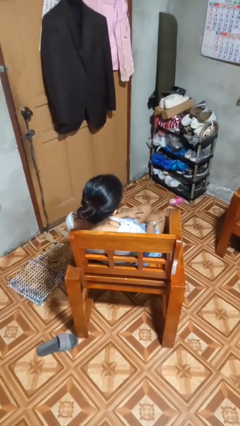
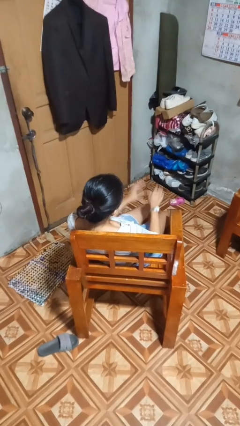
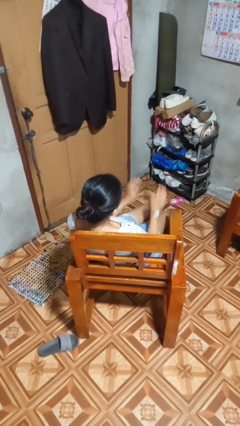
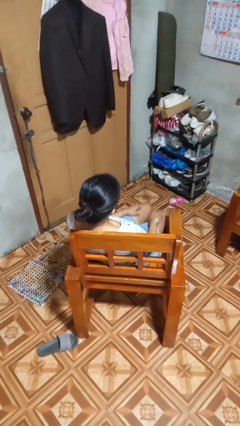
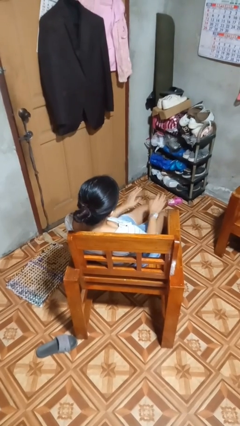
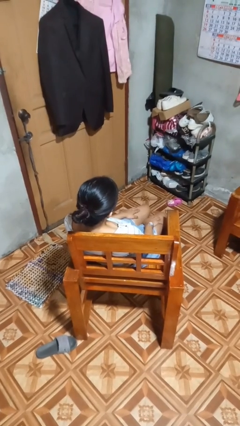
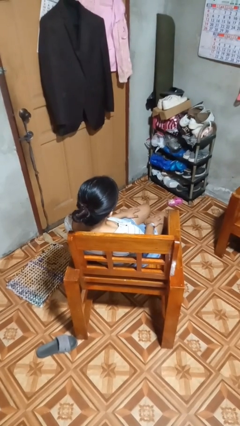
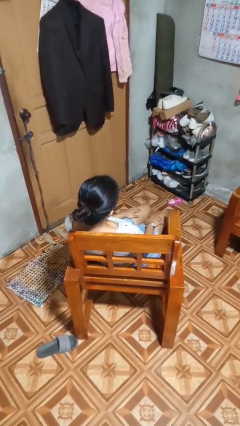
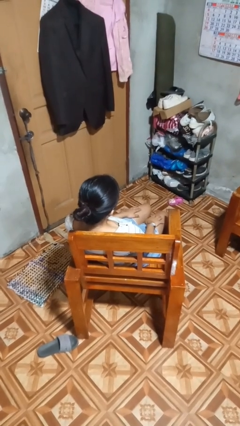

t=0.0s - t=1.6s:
person slaps hands on thighs

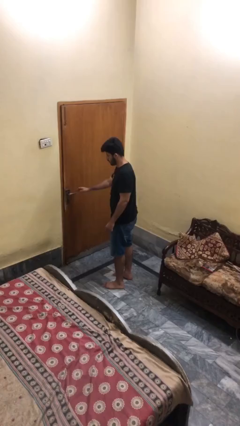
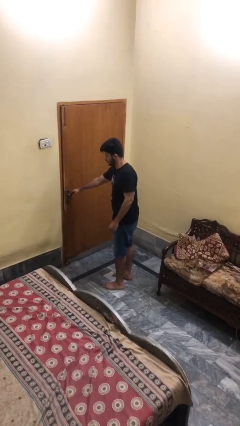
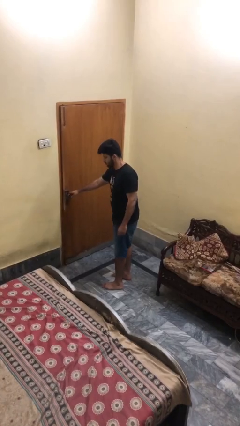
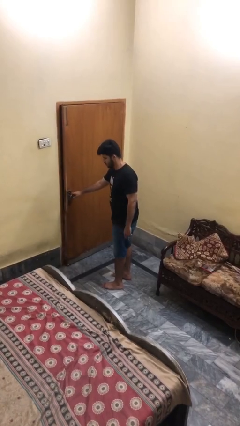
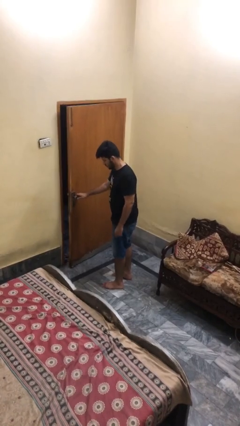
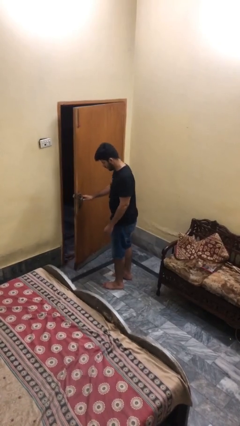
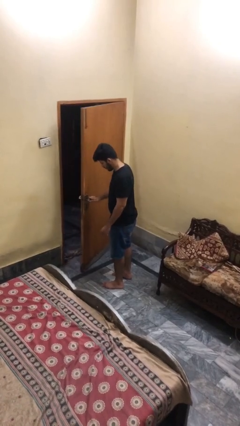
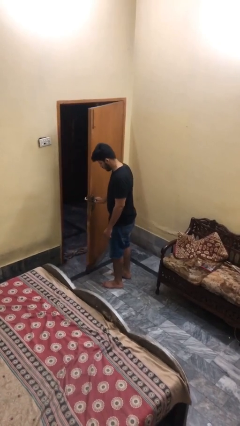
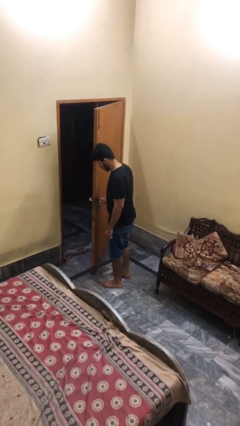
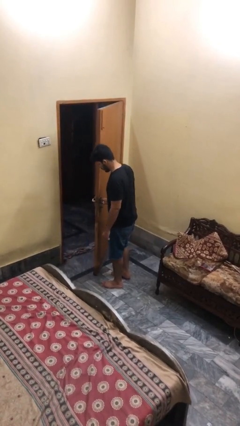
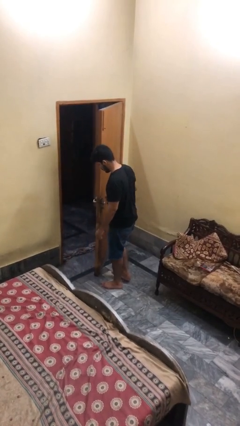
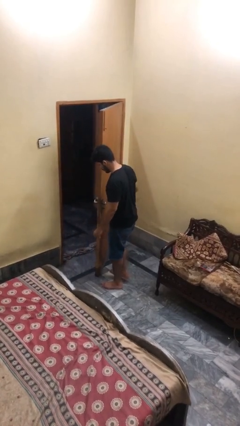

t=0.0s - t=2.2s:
person opens facility door

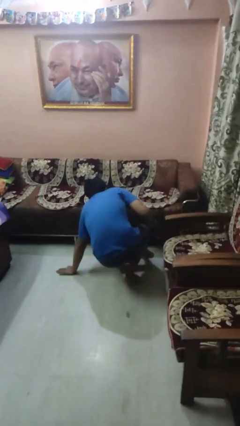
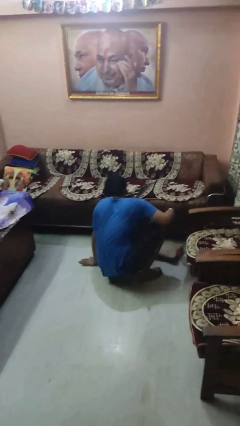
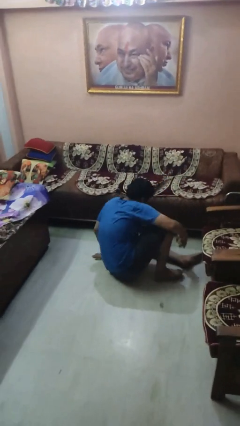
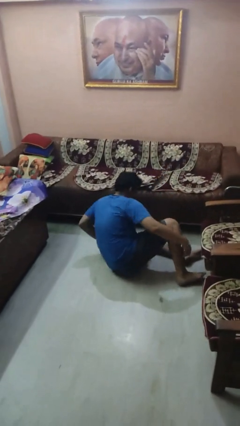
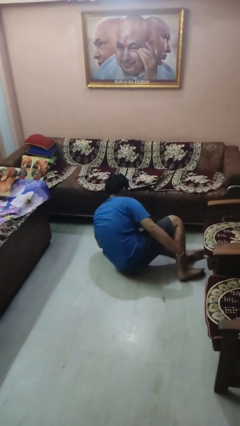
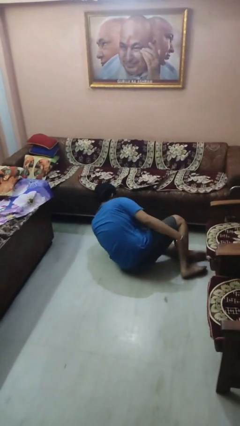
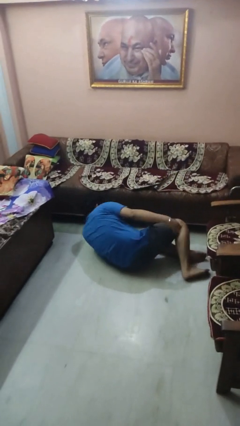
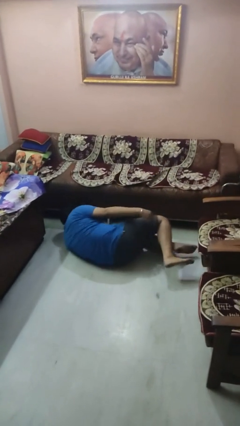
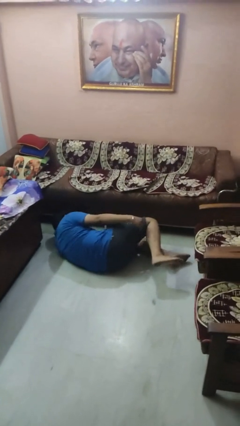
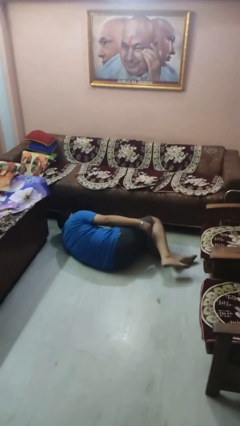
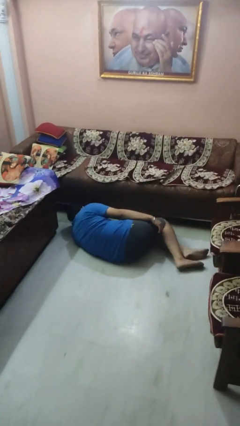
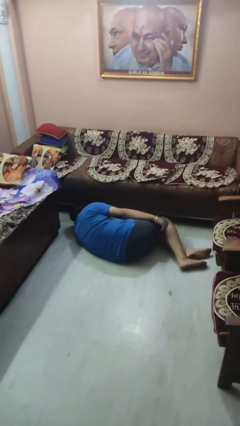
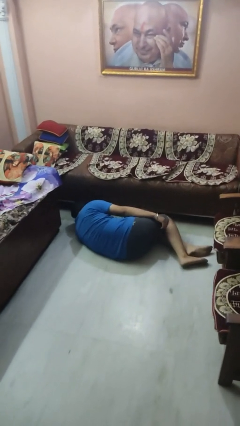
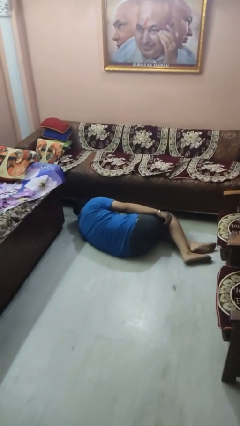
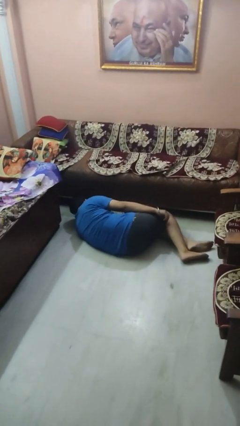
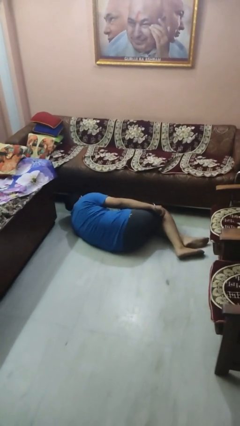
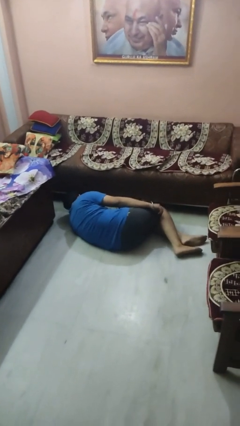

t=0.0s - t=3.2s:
person lies down on floor

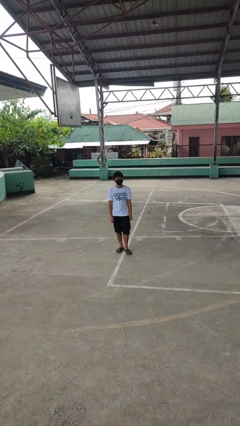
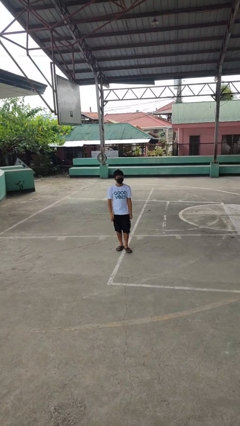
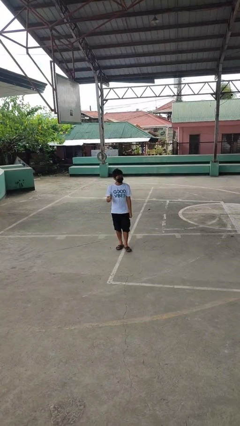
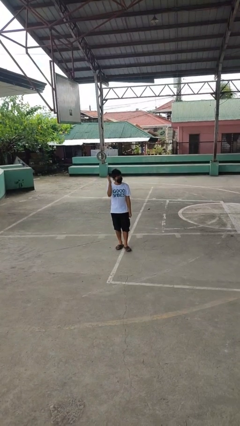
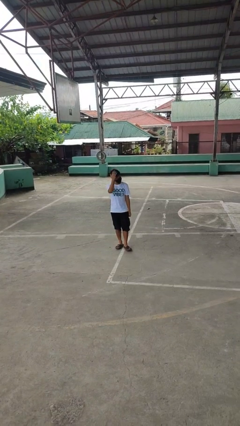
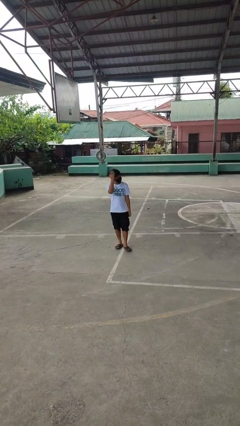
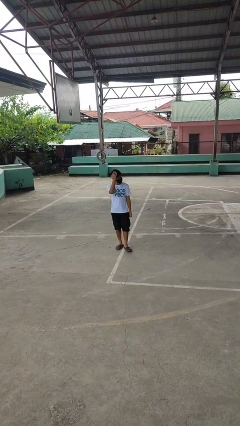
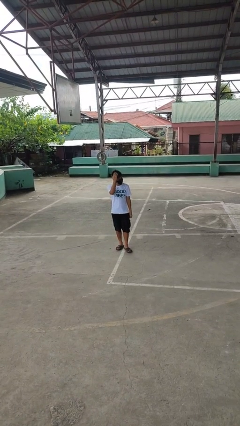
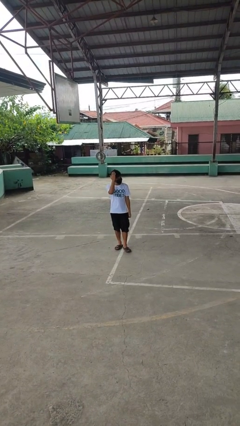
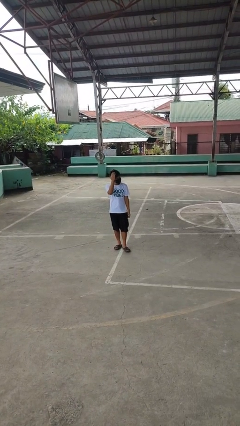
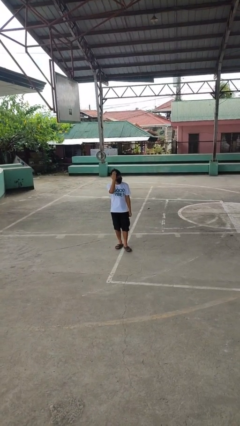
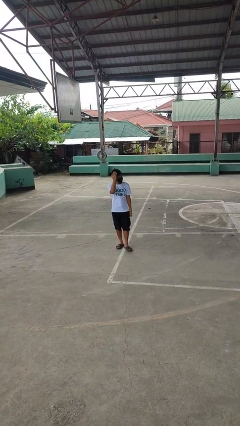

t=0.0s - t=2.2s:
person pats head

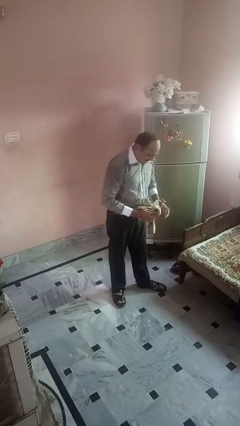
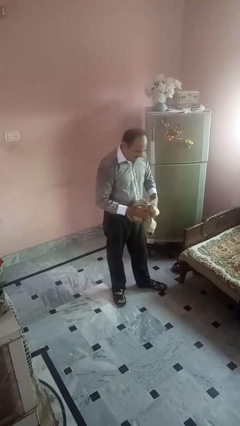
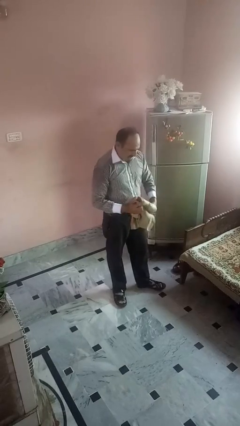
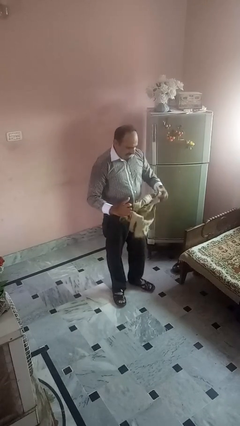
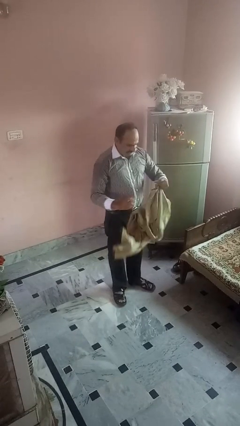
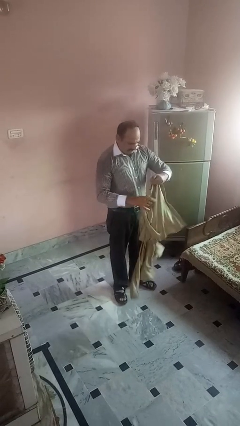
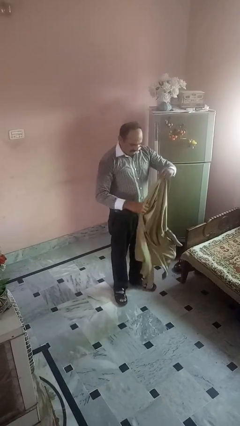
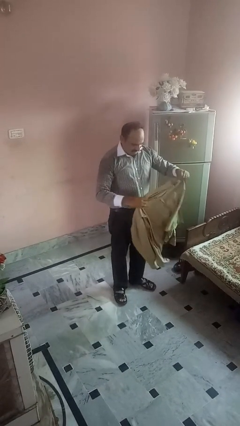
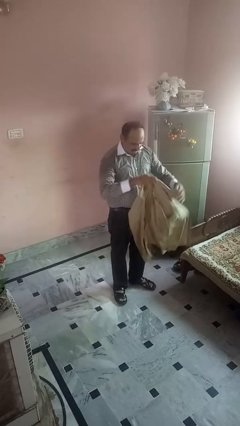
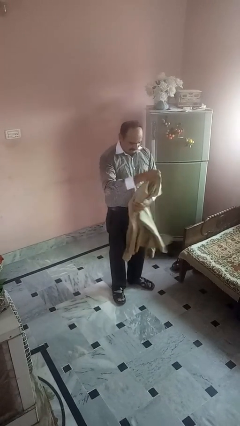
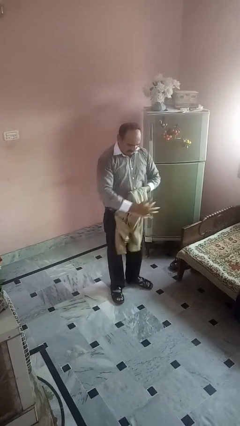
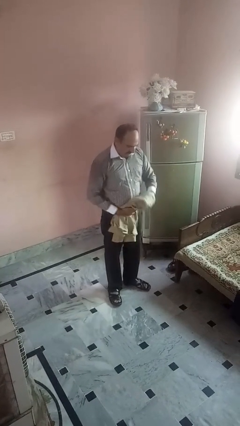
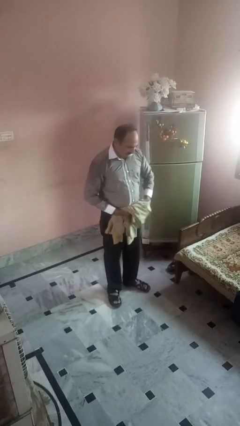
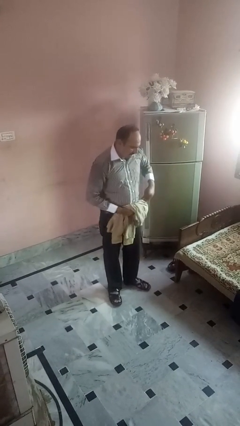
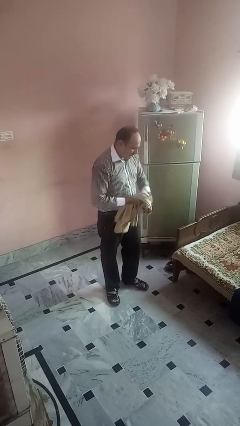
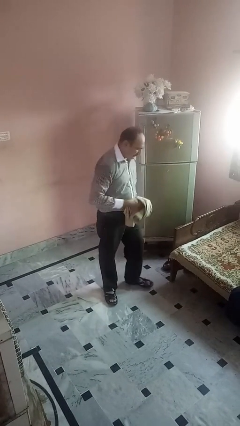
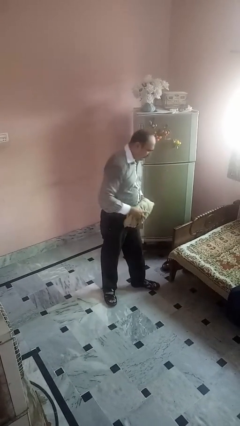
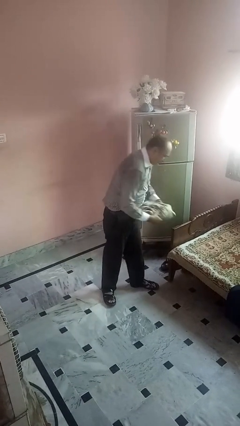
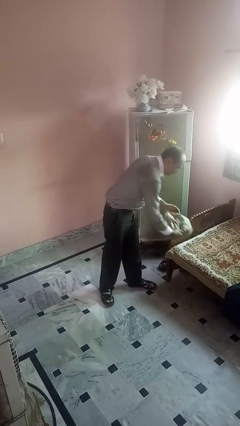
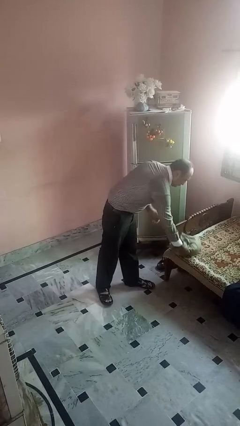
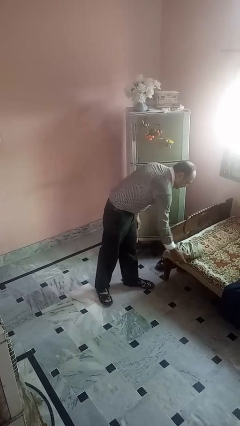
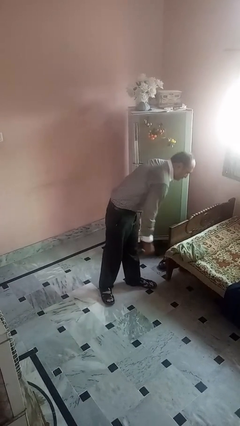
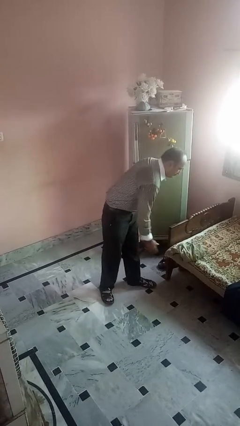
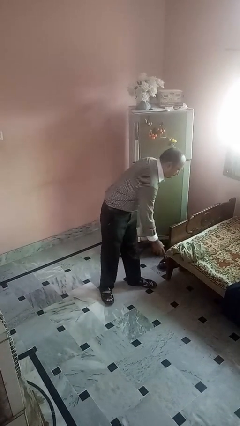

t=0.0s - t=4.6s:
person folds shirt

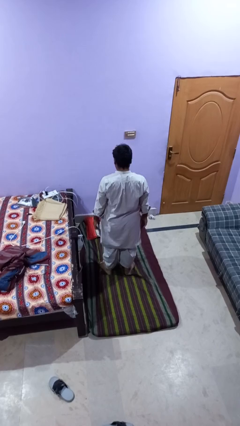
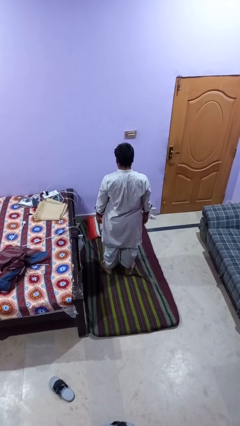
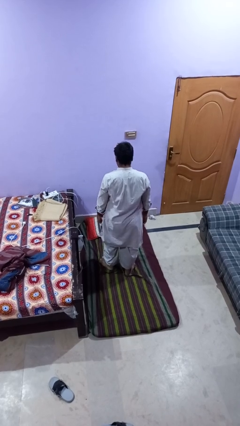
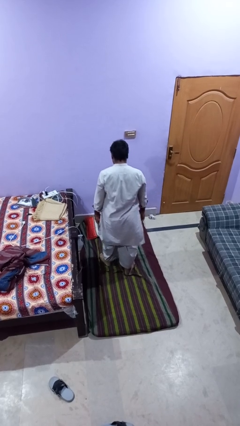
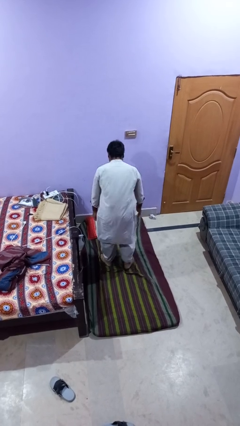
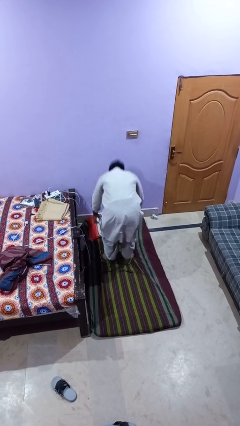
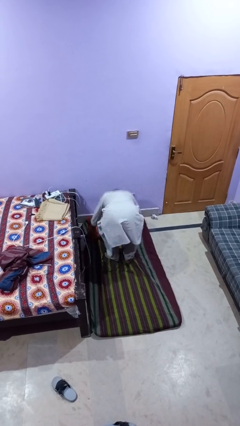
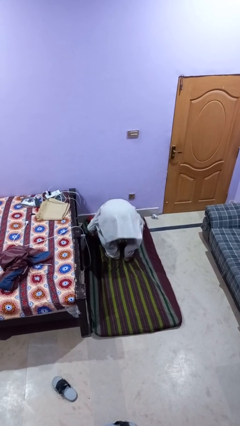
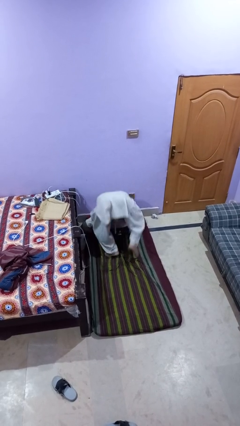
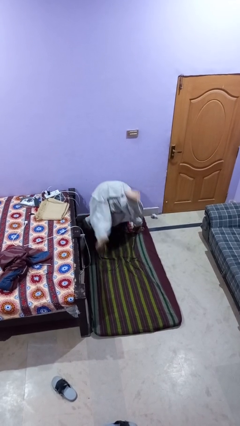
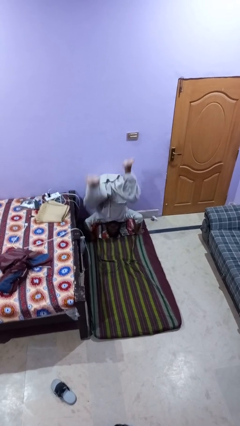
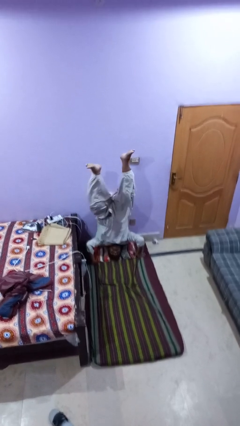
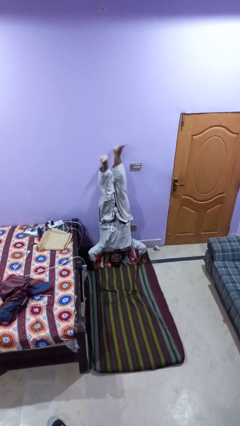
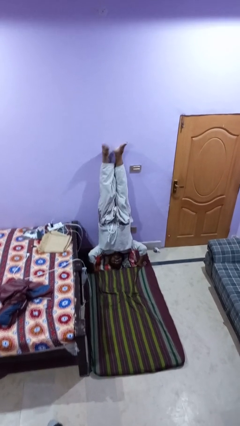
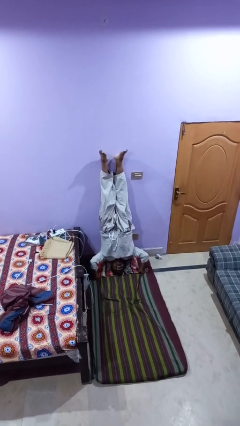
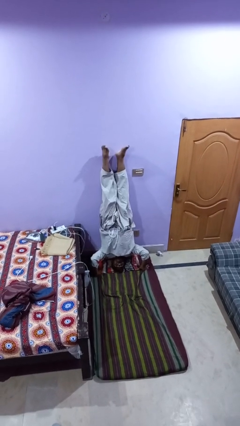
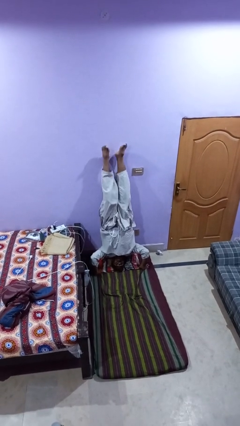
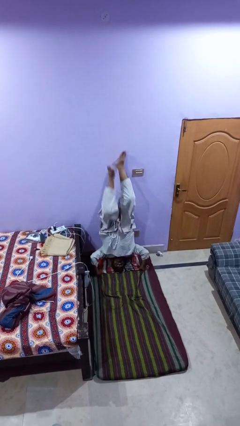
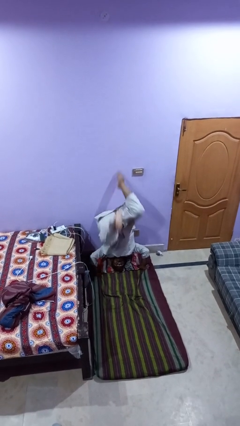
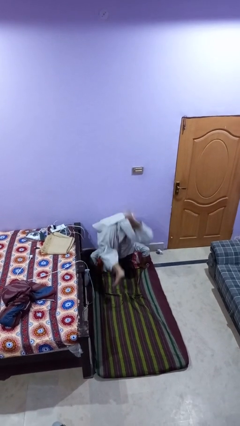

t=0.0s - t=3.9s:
person handstand

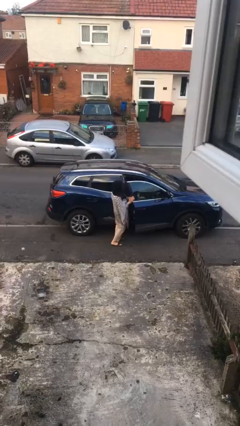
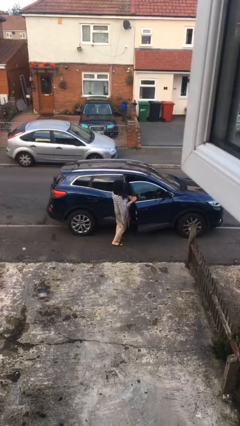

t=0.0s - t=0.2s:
person enters car
